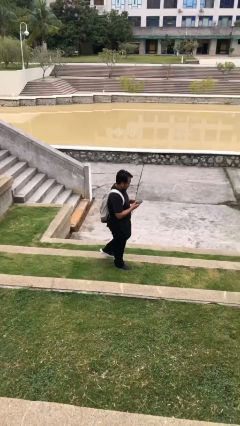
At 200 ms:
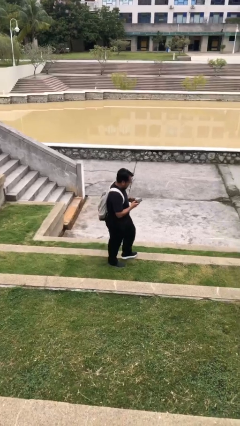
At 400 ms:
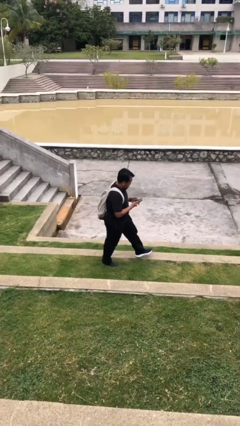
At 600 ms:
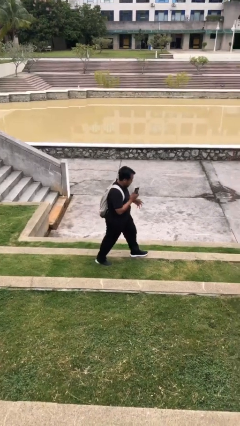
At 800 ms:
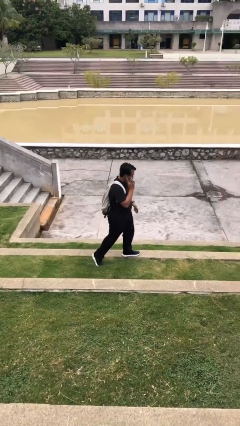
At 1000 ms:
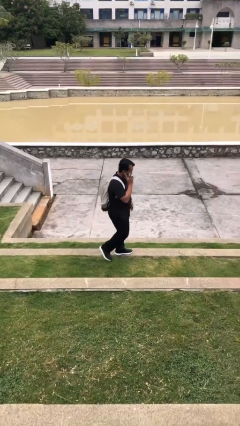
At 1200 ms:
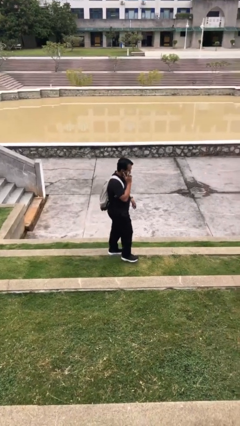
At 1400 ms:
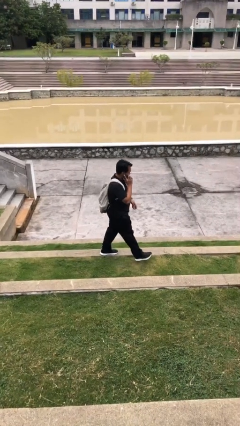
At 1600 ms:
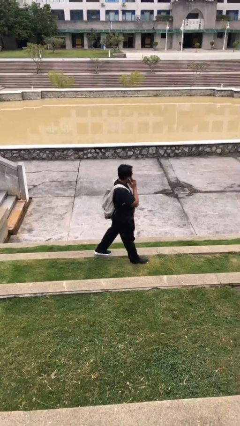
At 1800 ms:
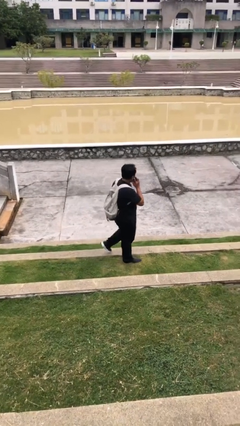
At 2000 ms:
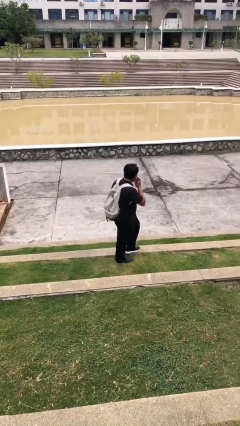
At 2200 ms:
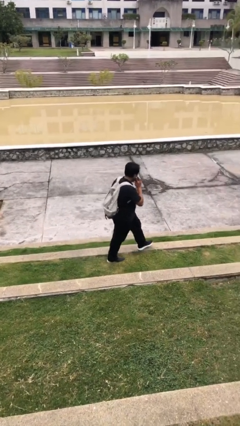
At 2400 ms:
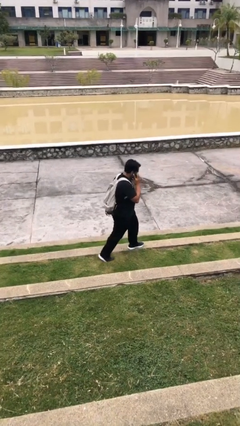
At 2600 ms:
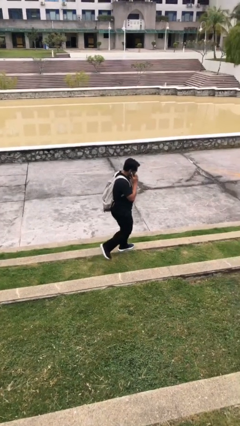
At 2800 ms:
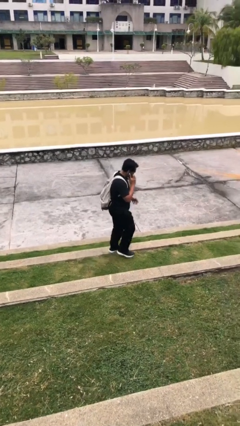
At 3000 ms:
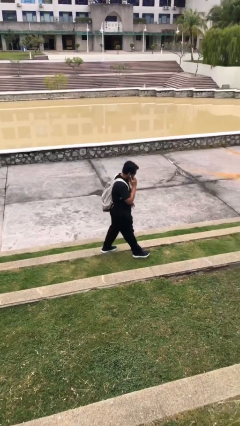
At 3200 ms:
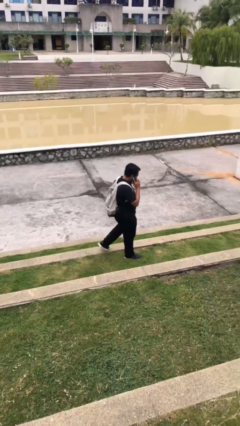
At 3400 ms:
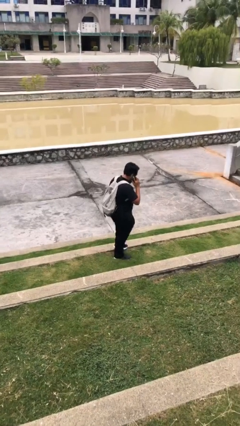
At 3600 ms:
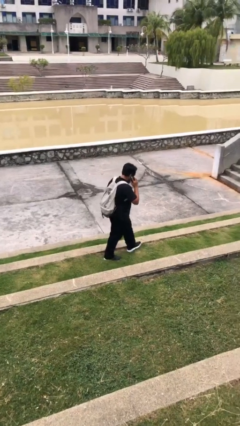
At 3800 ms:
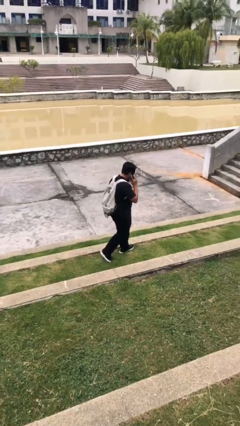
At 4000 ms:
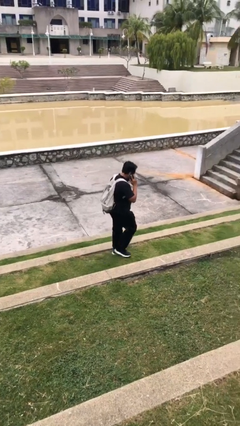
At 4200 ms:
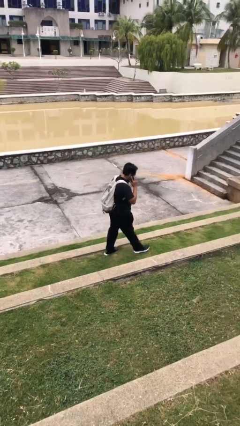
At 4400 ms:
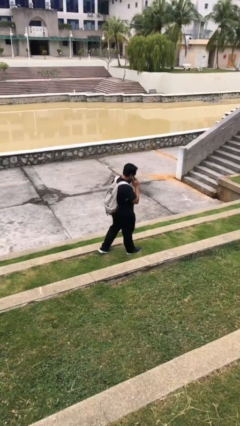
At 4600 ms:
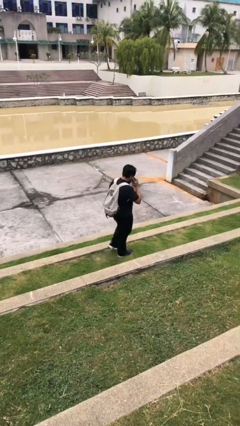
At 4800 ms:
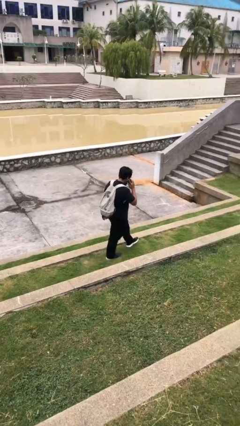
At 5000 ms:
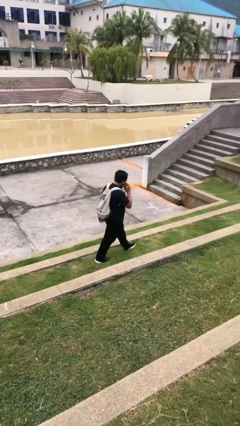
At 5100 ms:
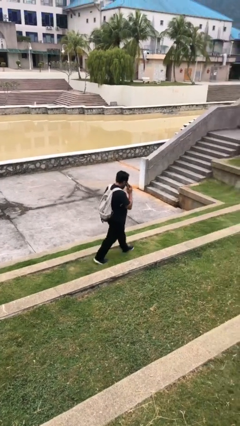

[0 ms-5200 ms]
person talks on phone

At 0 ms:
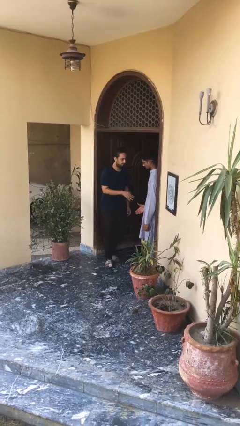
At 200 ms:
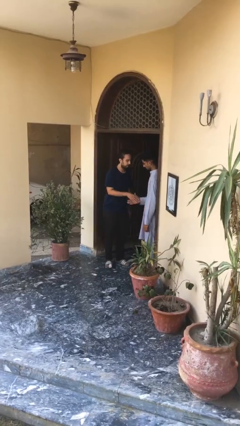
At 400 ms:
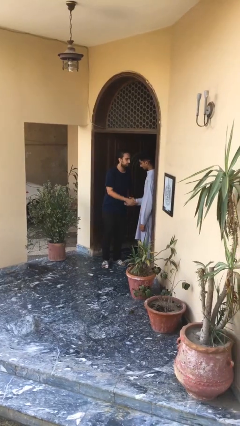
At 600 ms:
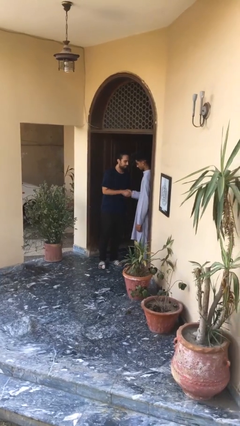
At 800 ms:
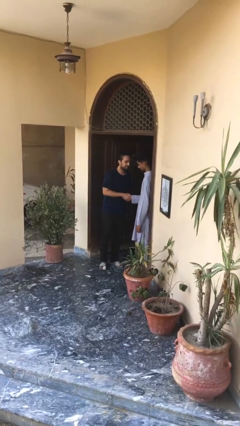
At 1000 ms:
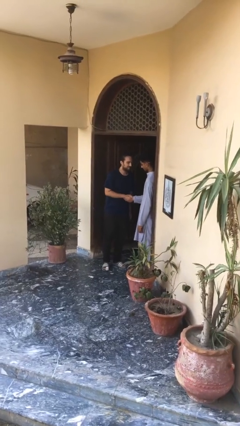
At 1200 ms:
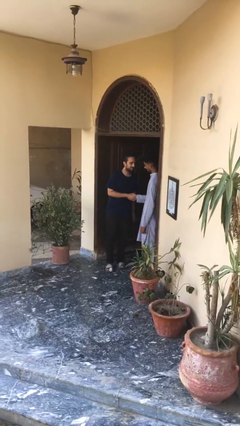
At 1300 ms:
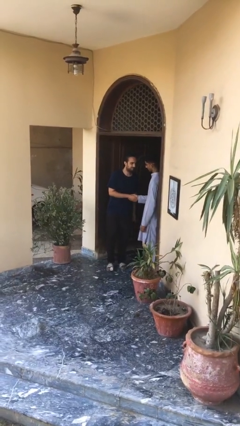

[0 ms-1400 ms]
person shakes hand

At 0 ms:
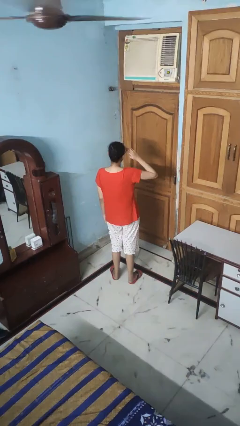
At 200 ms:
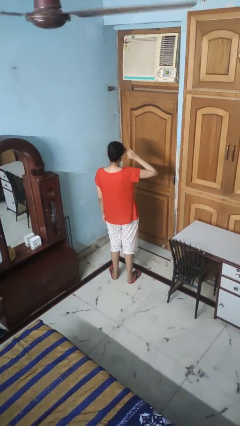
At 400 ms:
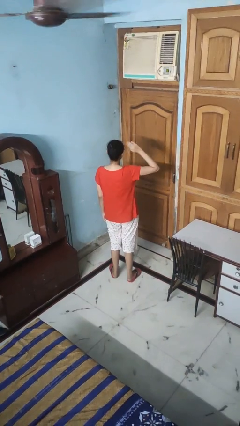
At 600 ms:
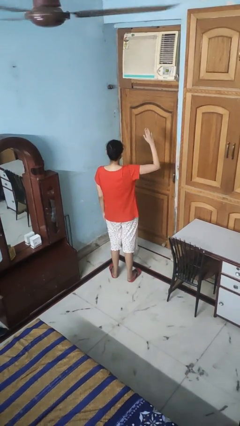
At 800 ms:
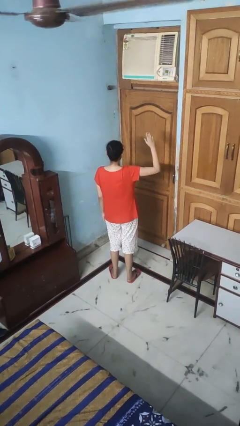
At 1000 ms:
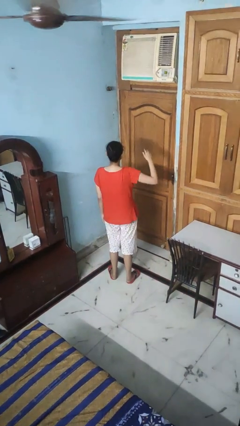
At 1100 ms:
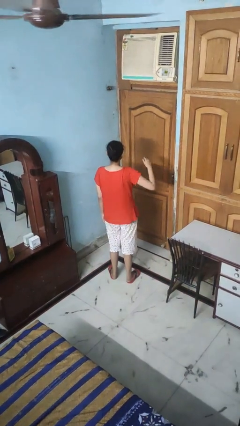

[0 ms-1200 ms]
person salutes

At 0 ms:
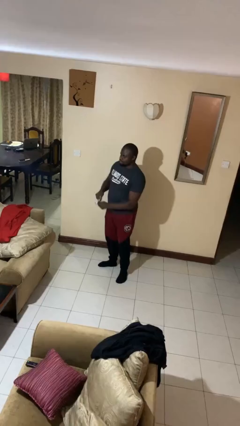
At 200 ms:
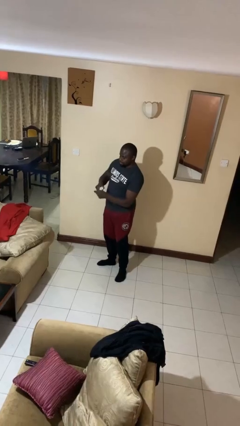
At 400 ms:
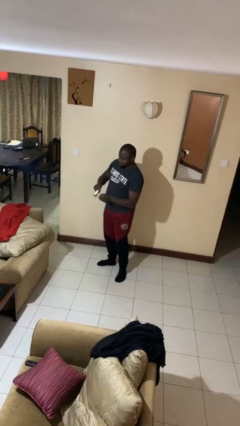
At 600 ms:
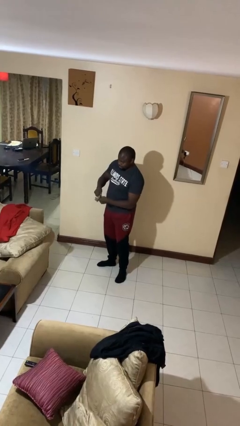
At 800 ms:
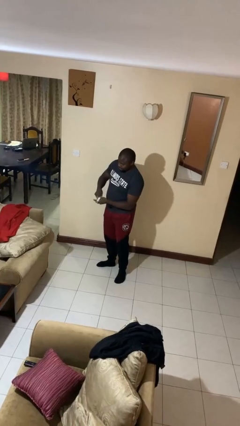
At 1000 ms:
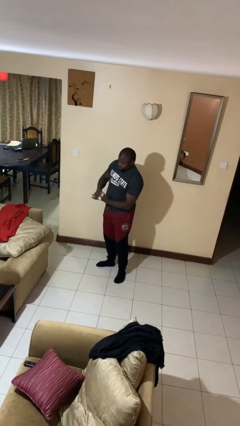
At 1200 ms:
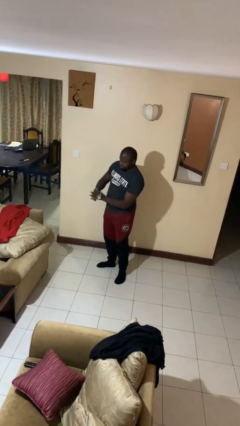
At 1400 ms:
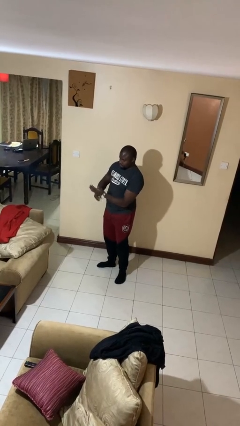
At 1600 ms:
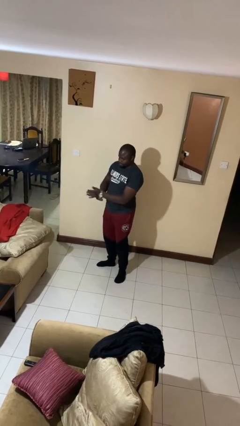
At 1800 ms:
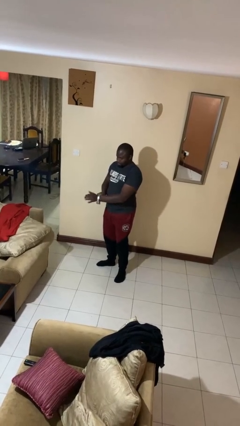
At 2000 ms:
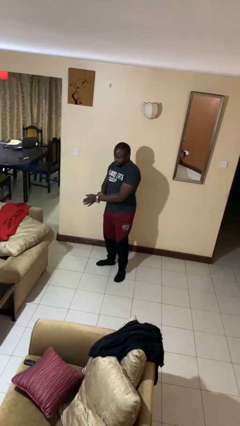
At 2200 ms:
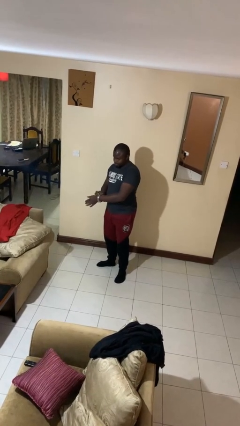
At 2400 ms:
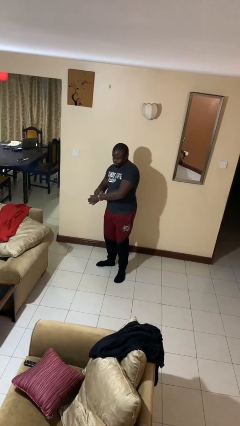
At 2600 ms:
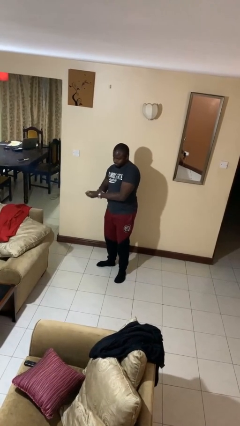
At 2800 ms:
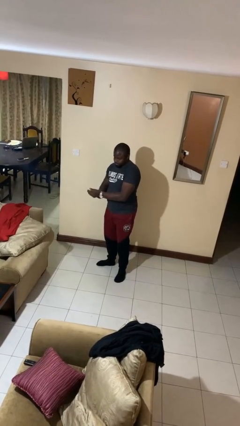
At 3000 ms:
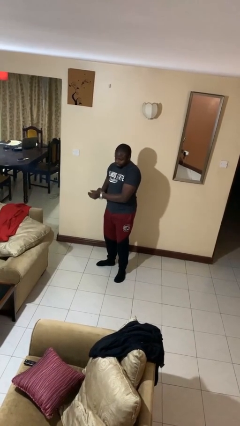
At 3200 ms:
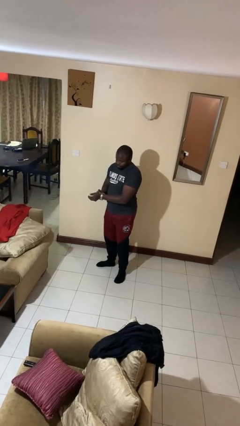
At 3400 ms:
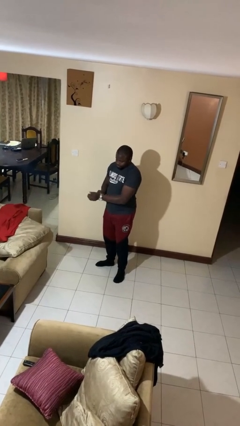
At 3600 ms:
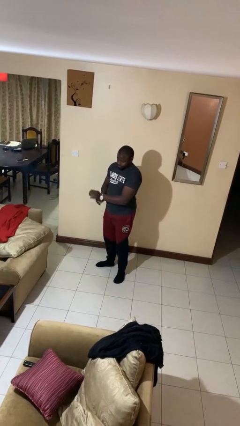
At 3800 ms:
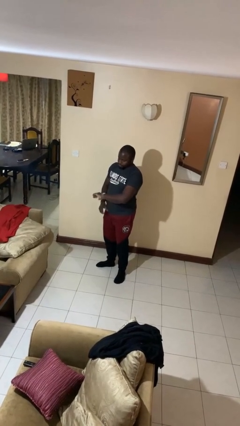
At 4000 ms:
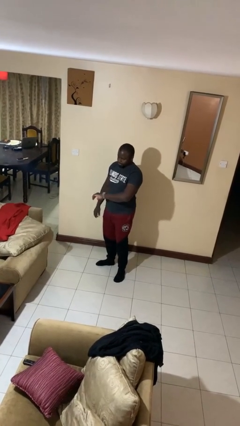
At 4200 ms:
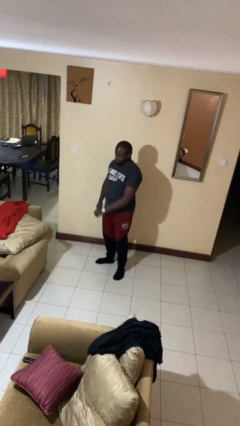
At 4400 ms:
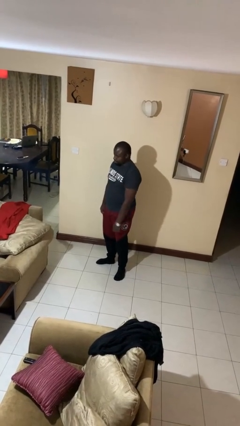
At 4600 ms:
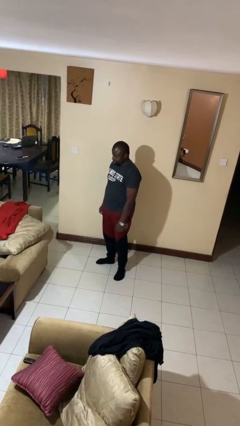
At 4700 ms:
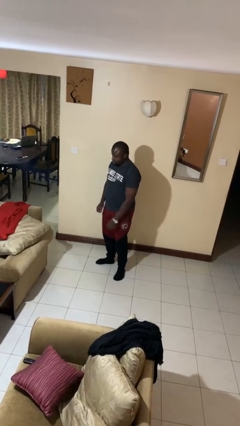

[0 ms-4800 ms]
person puts on wristwatch

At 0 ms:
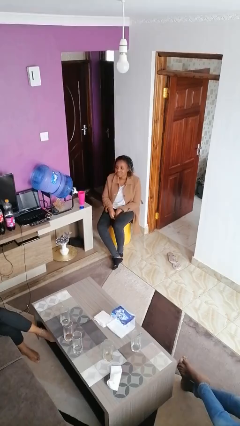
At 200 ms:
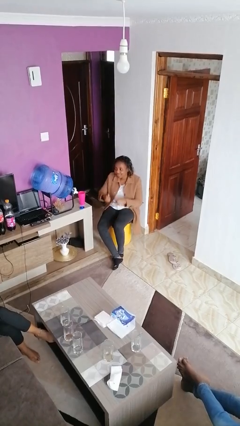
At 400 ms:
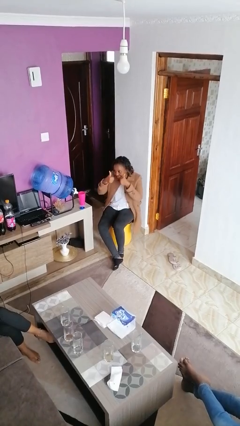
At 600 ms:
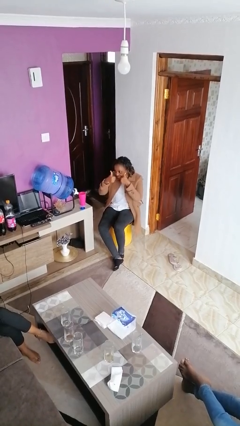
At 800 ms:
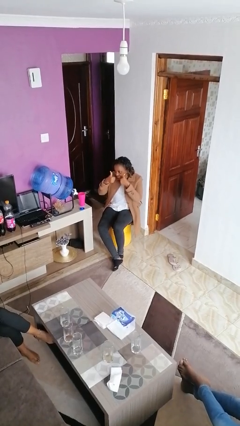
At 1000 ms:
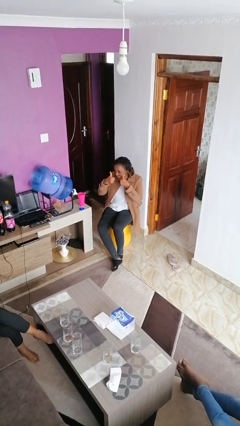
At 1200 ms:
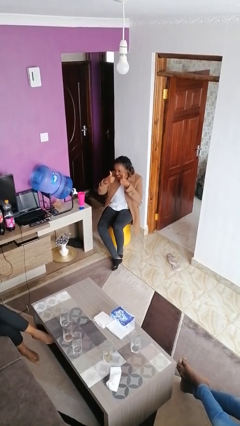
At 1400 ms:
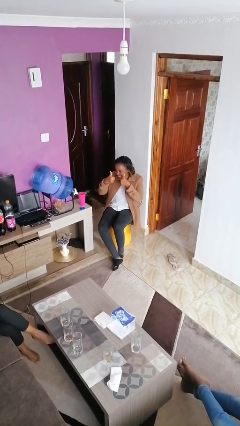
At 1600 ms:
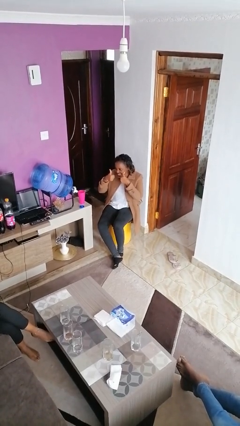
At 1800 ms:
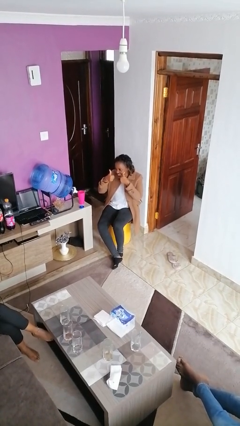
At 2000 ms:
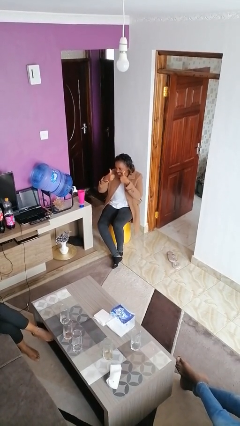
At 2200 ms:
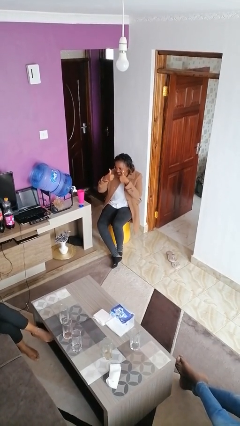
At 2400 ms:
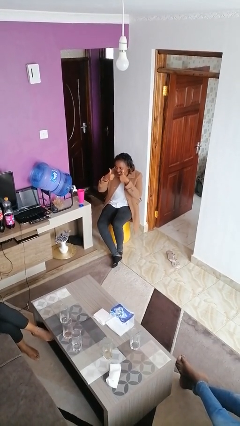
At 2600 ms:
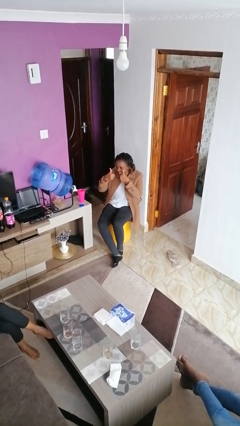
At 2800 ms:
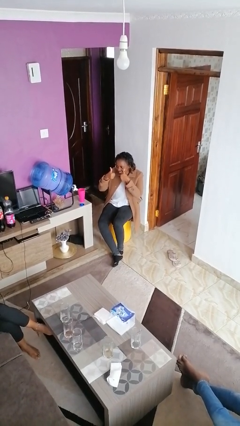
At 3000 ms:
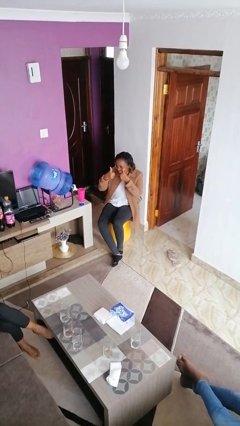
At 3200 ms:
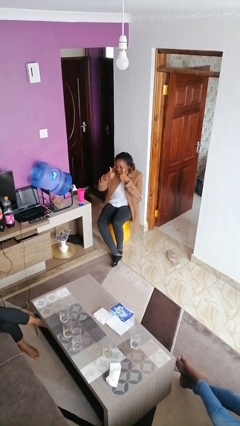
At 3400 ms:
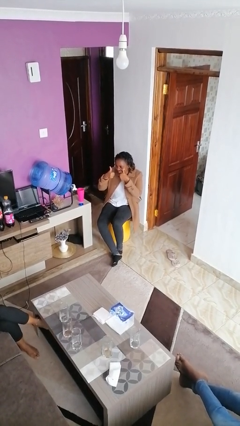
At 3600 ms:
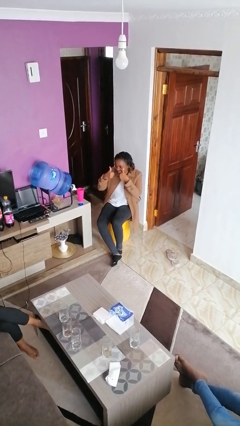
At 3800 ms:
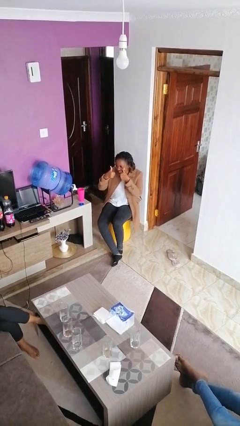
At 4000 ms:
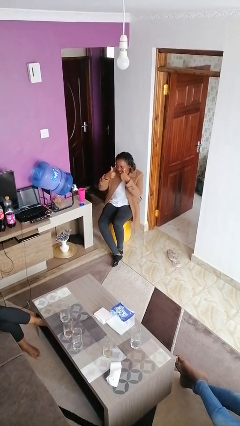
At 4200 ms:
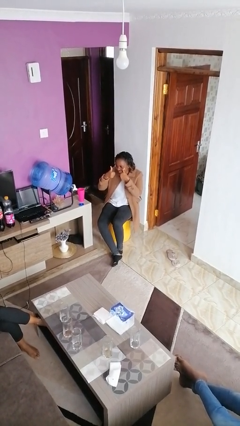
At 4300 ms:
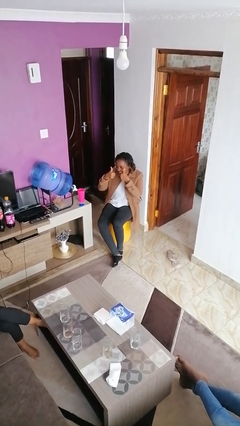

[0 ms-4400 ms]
person gestures thumbs up

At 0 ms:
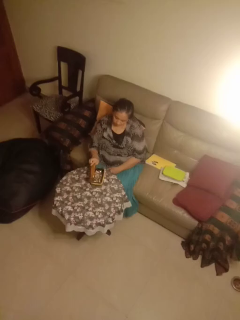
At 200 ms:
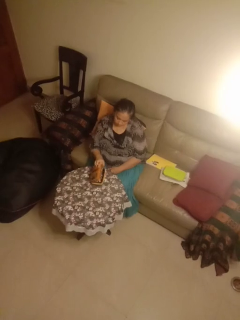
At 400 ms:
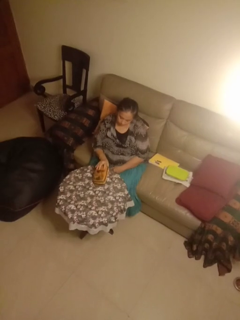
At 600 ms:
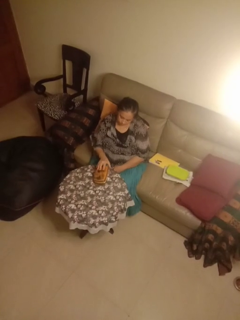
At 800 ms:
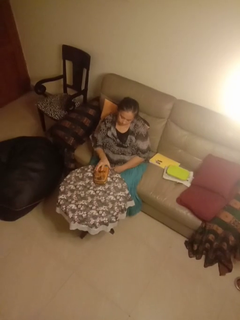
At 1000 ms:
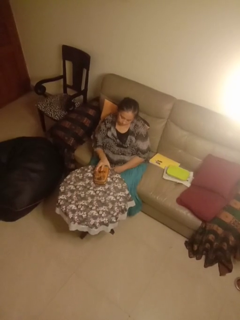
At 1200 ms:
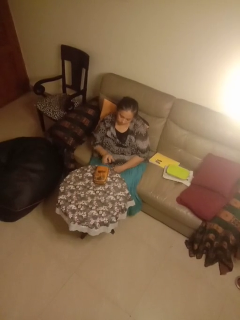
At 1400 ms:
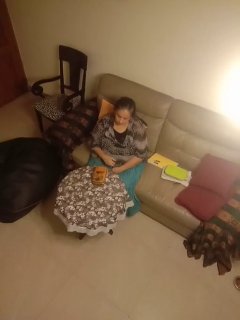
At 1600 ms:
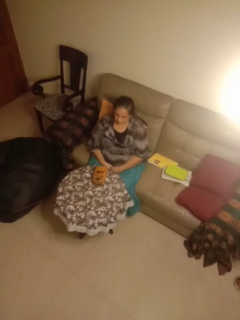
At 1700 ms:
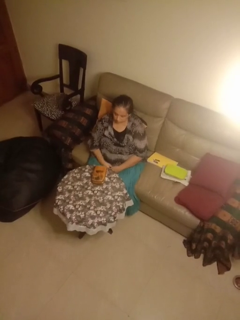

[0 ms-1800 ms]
person closes jewelry box
